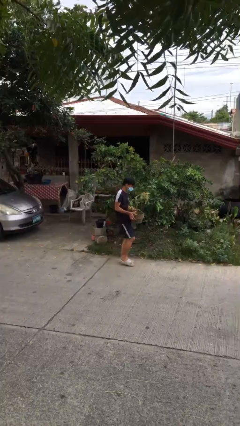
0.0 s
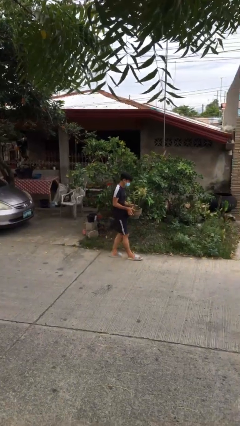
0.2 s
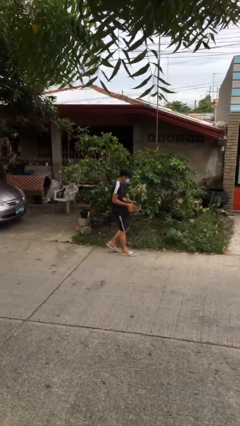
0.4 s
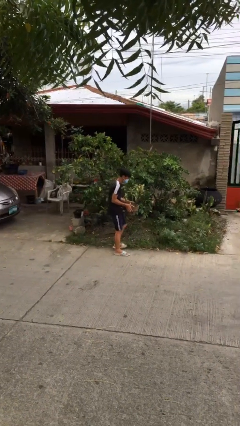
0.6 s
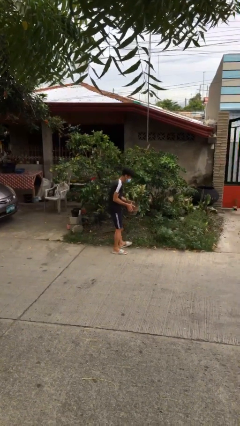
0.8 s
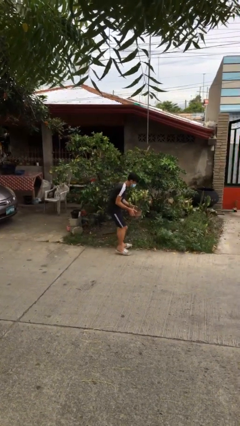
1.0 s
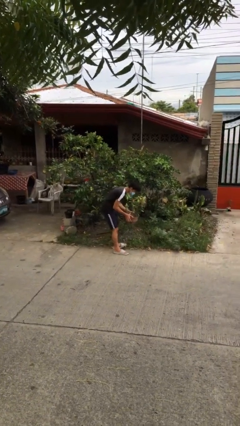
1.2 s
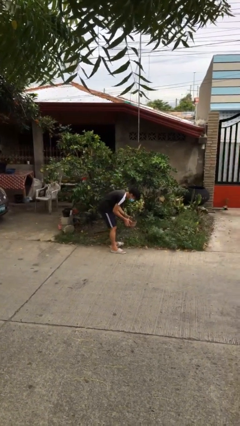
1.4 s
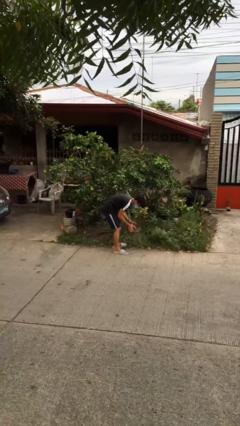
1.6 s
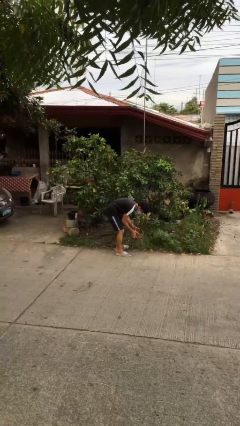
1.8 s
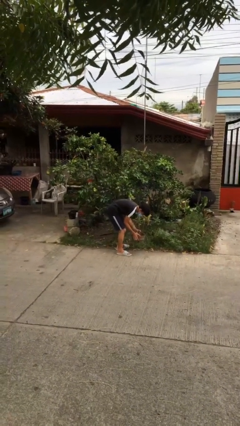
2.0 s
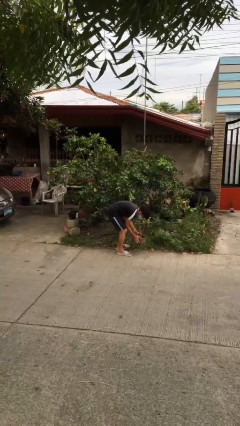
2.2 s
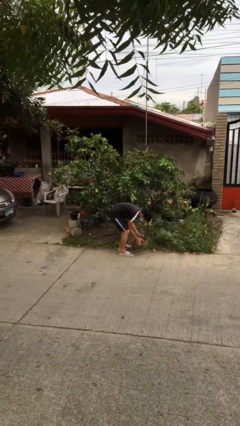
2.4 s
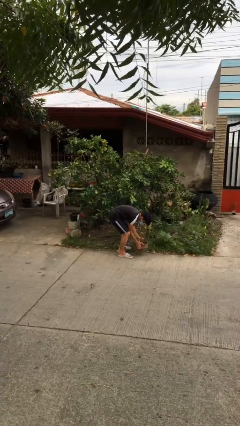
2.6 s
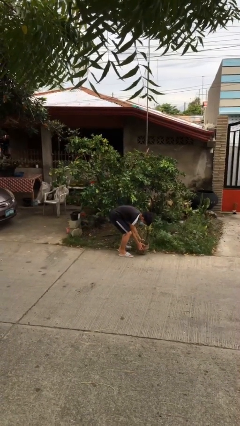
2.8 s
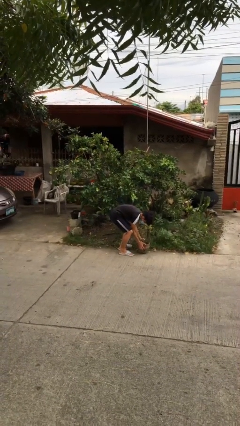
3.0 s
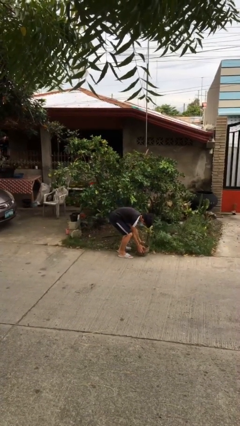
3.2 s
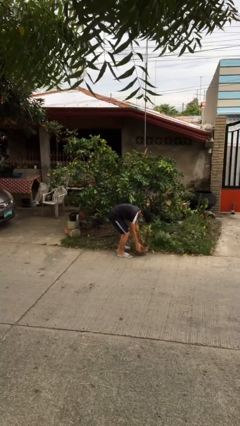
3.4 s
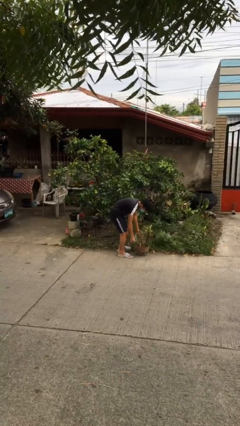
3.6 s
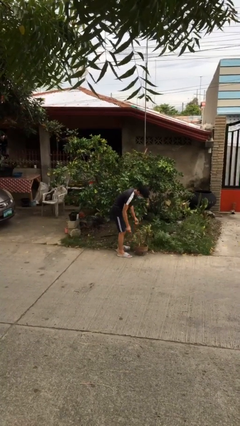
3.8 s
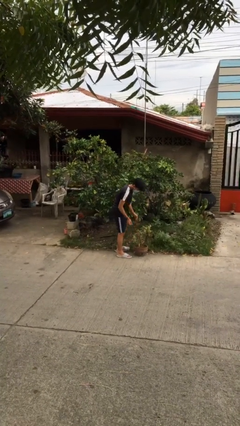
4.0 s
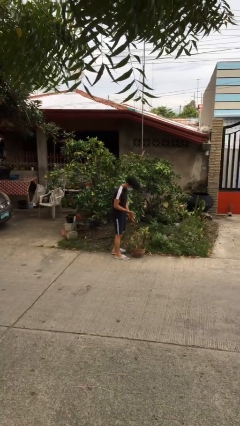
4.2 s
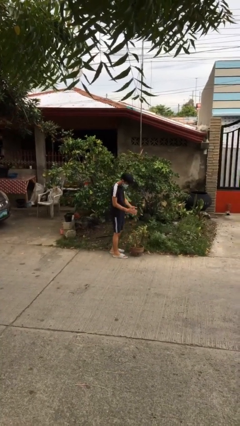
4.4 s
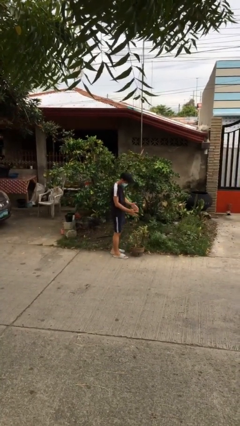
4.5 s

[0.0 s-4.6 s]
person puts down object on floor

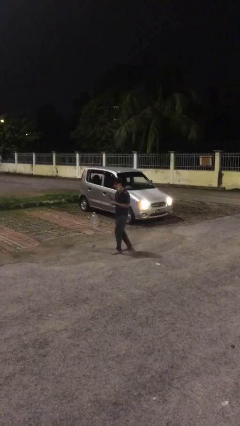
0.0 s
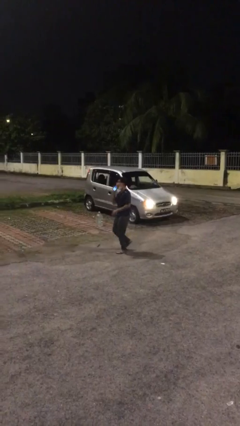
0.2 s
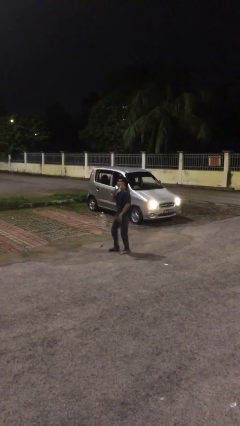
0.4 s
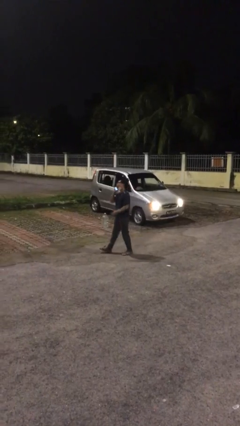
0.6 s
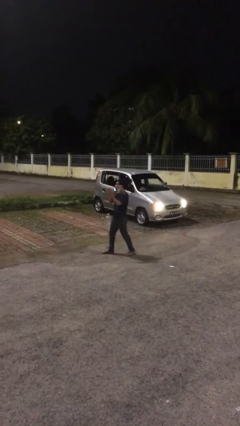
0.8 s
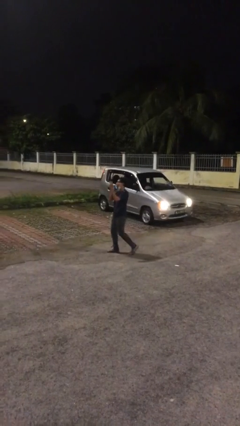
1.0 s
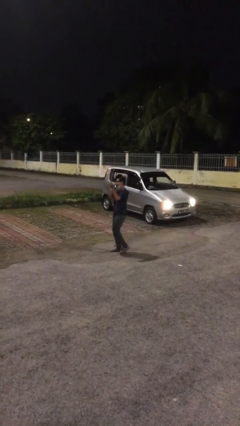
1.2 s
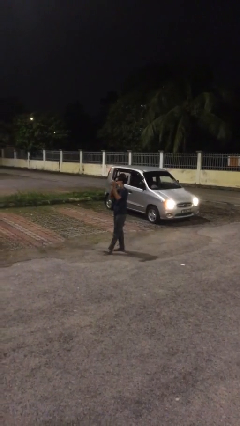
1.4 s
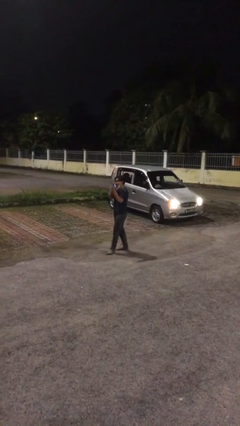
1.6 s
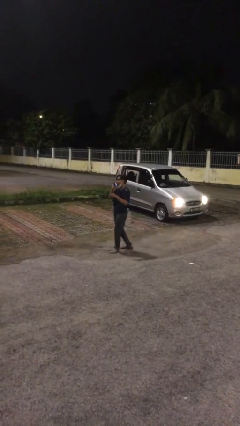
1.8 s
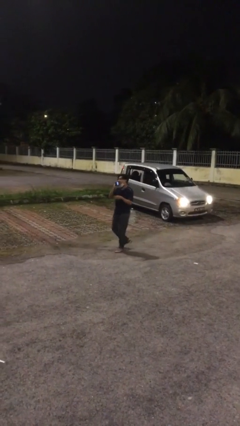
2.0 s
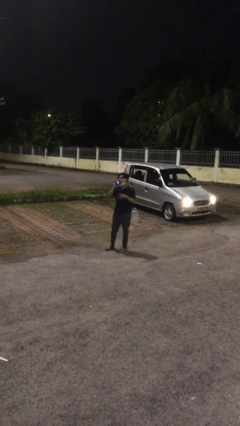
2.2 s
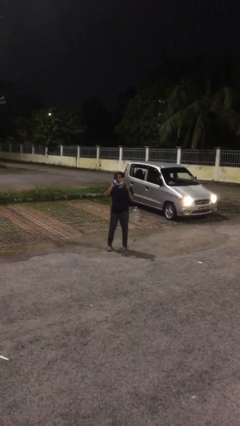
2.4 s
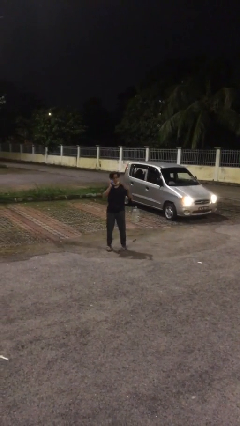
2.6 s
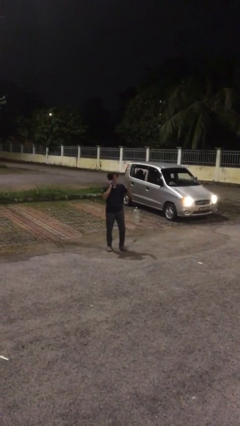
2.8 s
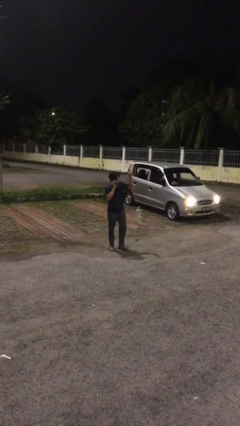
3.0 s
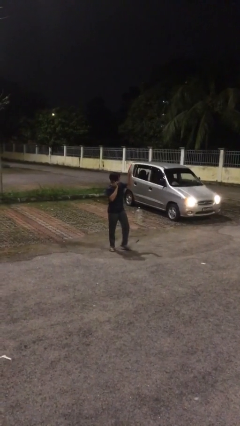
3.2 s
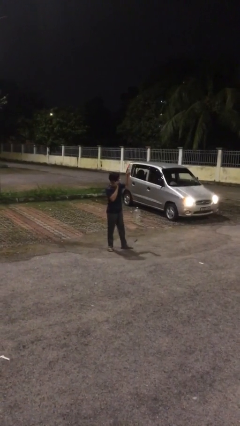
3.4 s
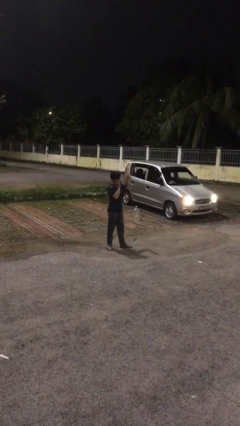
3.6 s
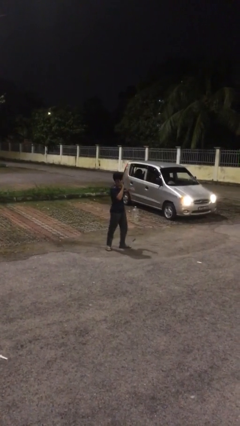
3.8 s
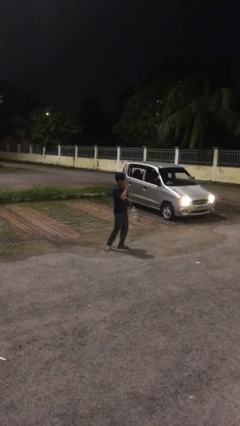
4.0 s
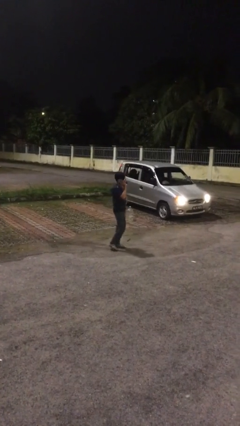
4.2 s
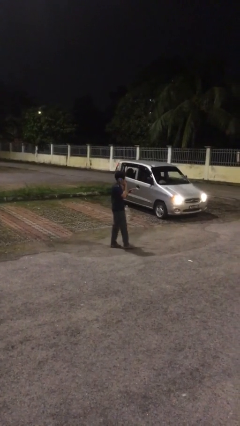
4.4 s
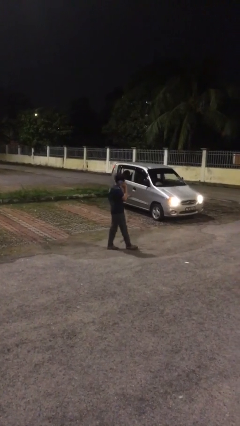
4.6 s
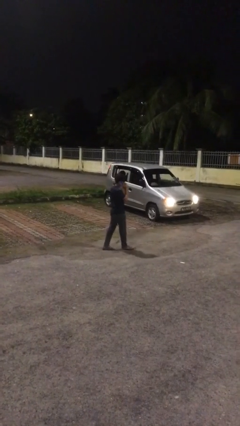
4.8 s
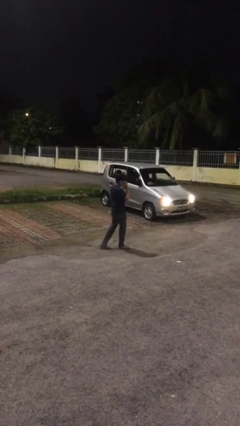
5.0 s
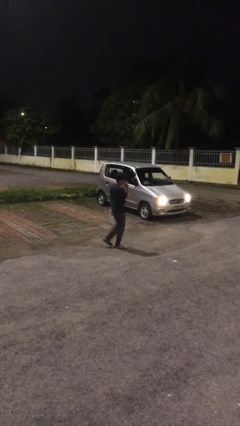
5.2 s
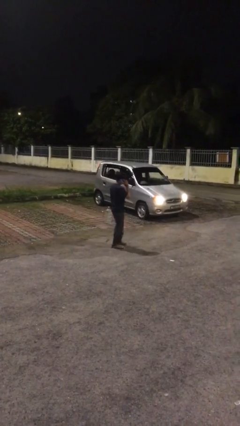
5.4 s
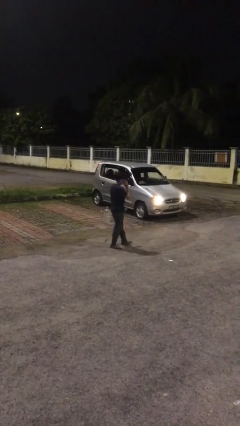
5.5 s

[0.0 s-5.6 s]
person talks on phone

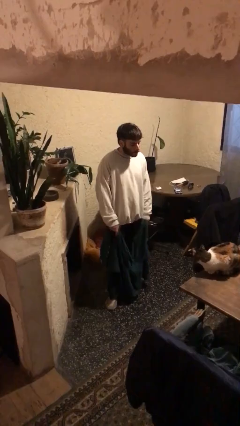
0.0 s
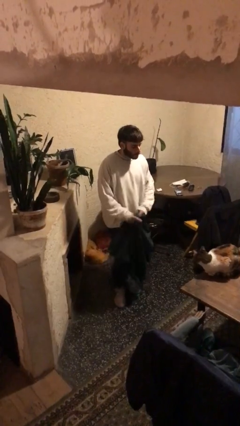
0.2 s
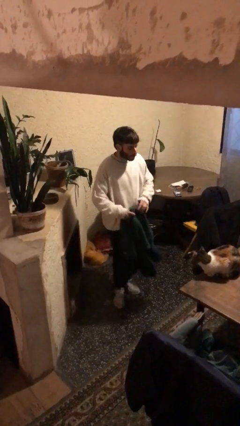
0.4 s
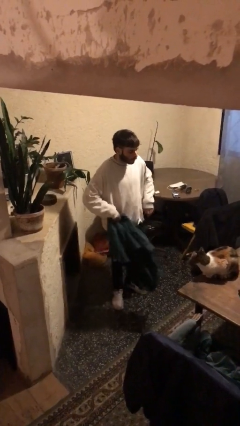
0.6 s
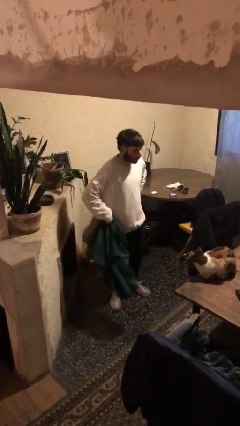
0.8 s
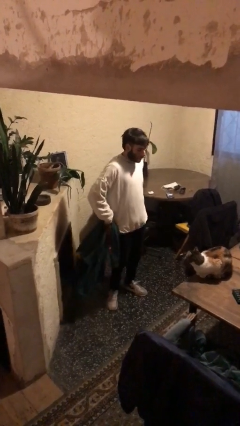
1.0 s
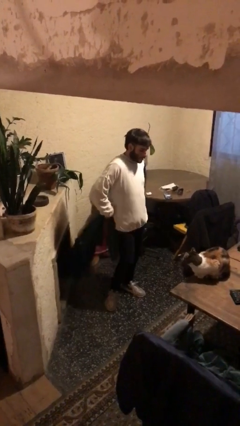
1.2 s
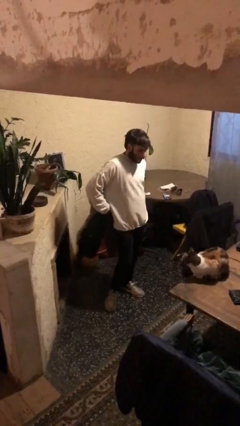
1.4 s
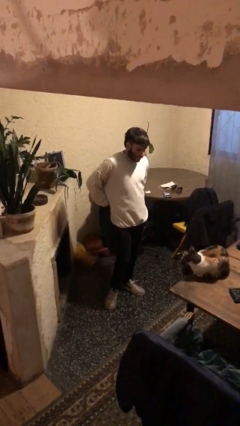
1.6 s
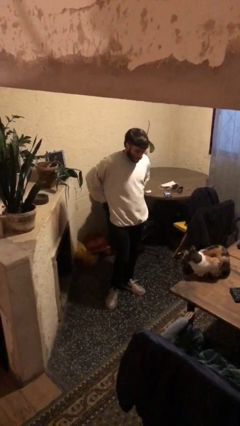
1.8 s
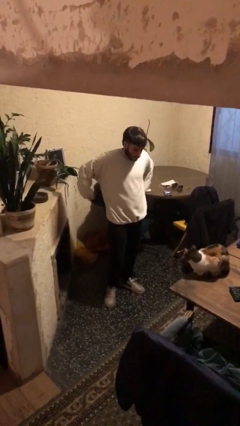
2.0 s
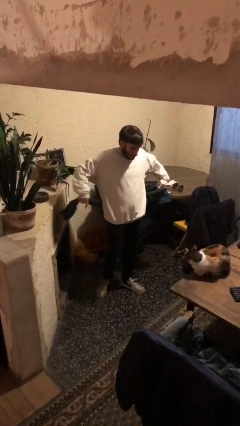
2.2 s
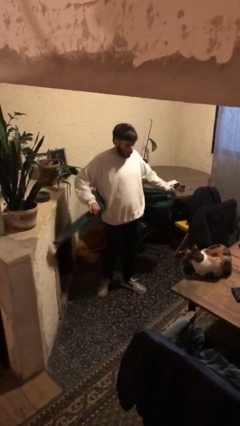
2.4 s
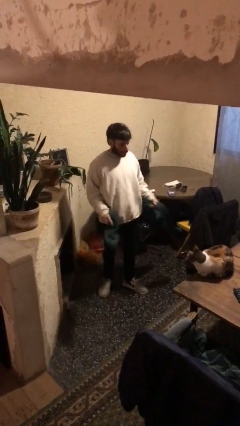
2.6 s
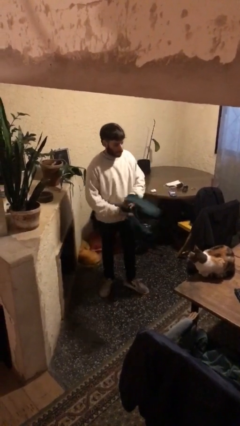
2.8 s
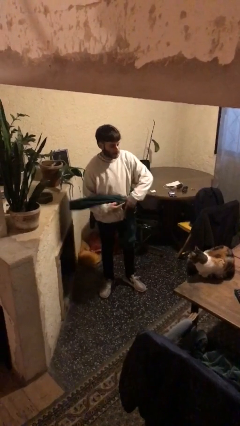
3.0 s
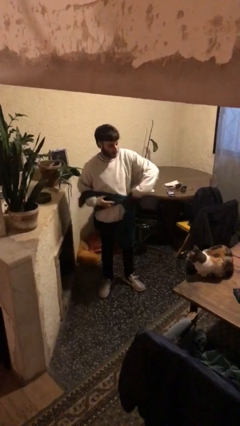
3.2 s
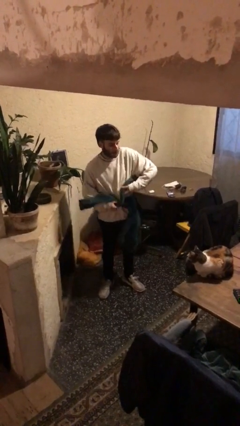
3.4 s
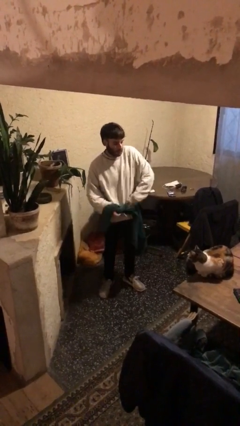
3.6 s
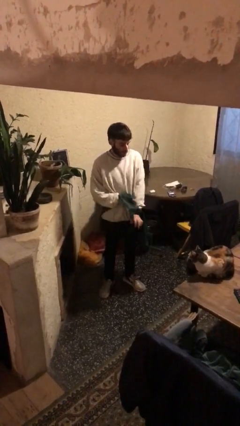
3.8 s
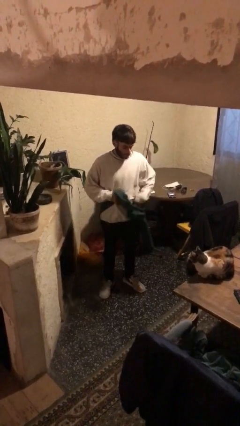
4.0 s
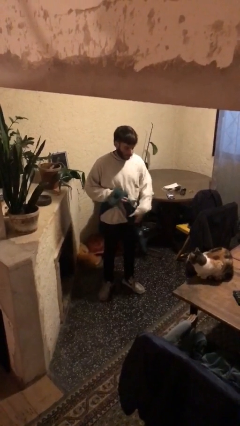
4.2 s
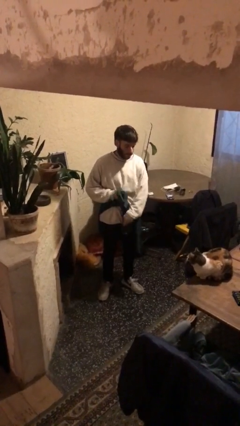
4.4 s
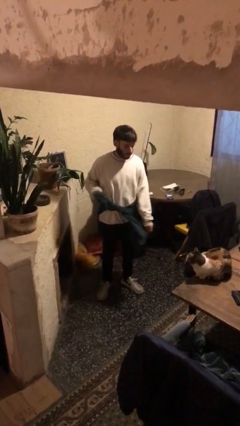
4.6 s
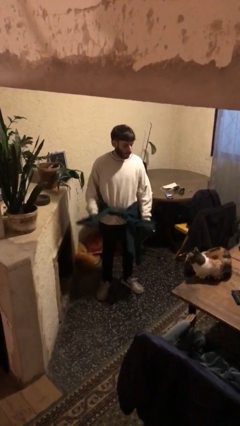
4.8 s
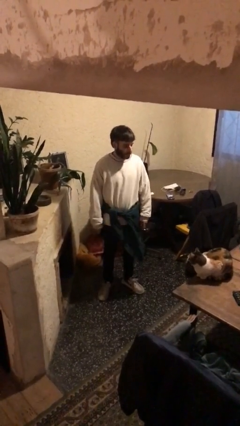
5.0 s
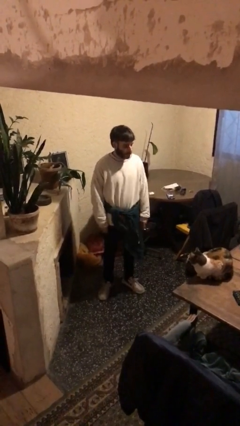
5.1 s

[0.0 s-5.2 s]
person ties jacket around waist

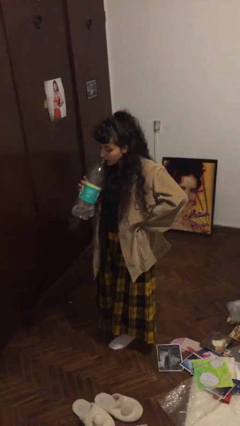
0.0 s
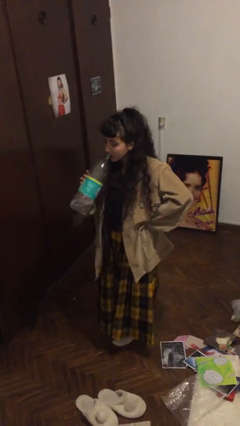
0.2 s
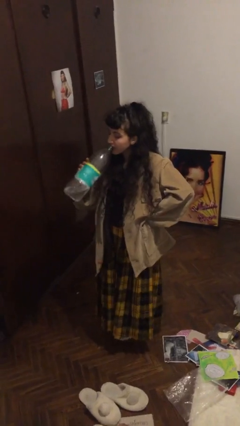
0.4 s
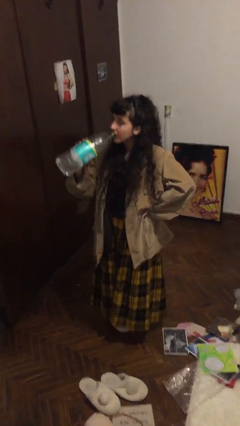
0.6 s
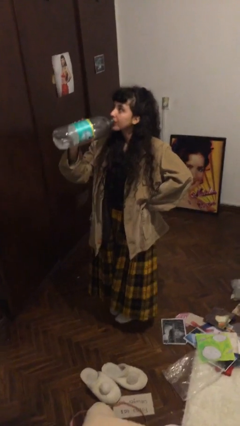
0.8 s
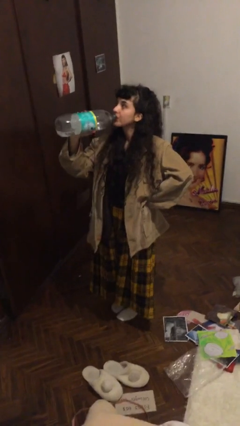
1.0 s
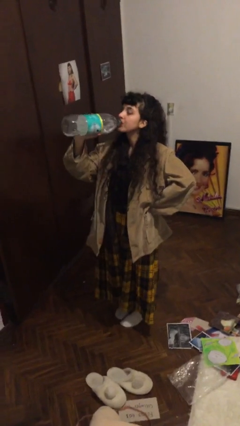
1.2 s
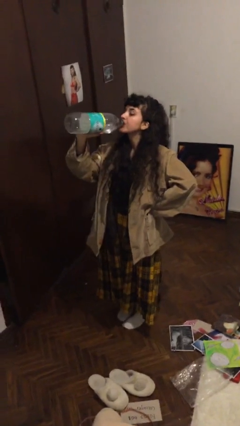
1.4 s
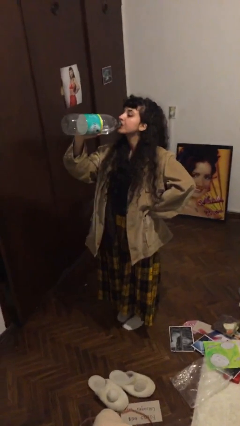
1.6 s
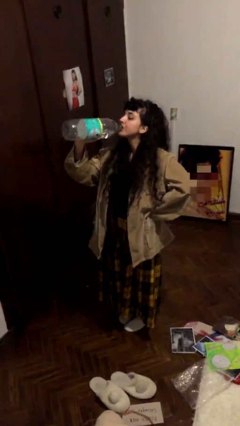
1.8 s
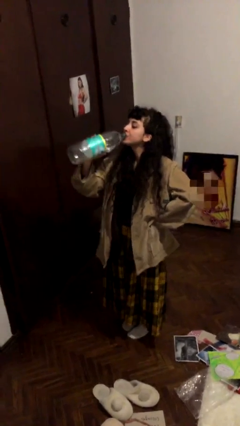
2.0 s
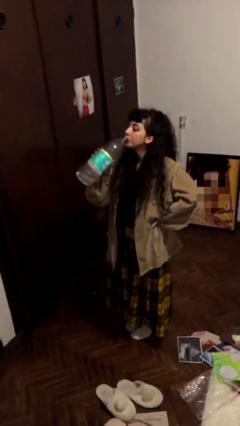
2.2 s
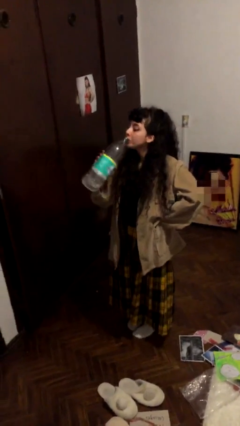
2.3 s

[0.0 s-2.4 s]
person drinks from bottle
